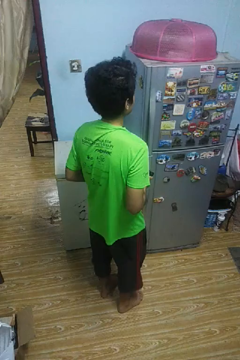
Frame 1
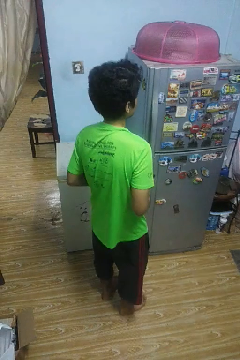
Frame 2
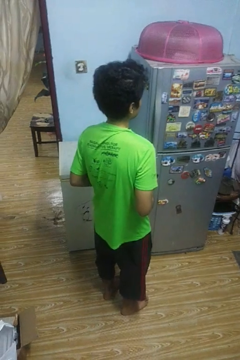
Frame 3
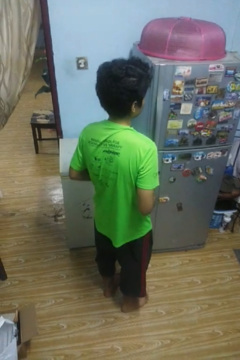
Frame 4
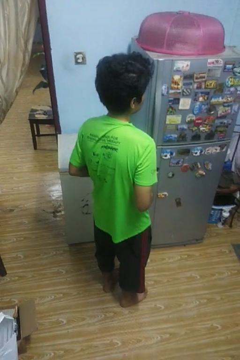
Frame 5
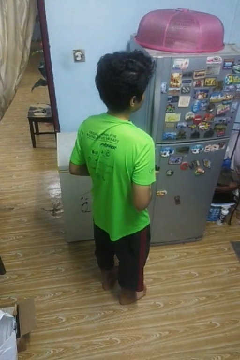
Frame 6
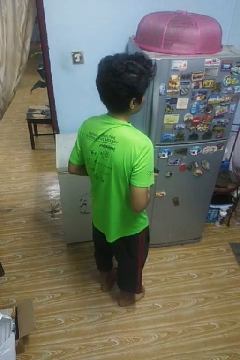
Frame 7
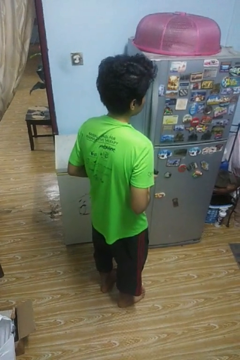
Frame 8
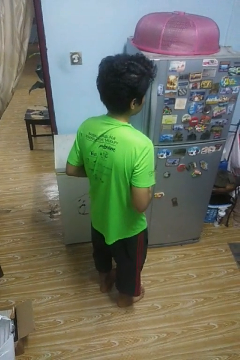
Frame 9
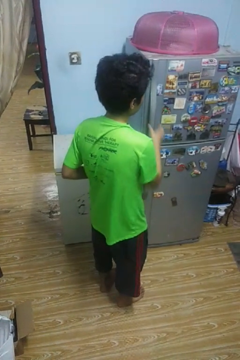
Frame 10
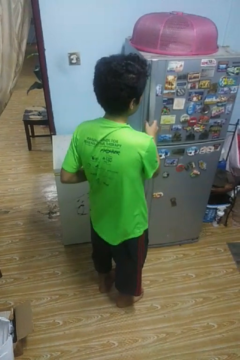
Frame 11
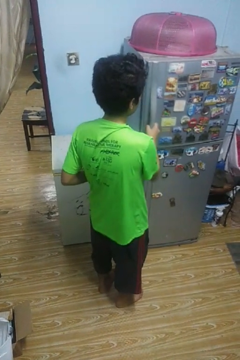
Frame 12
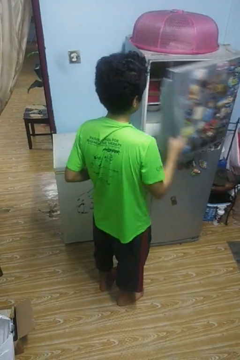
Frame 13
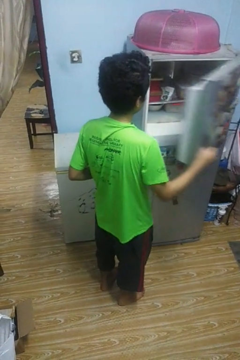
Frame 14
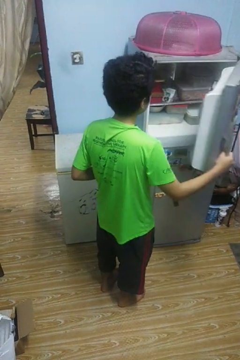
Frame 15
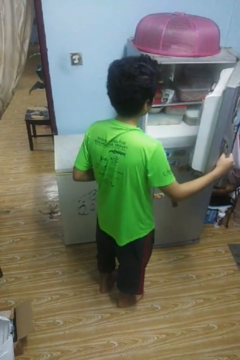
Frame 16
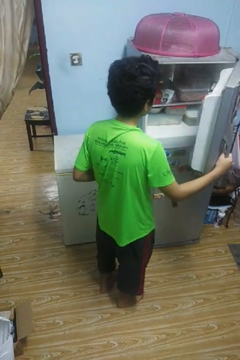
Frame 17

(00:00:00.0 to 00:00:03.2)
person opens refrigerator

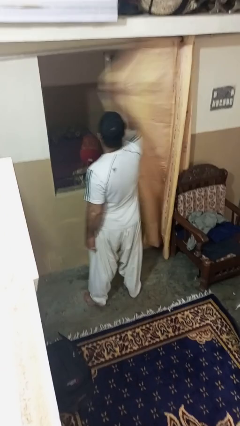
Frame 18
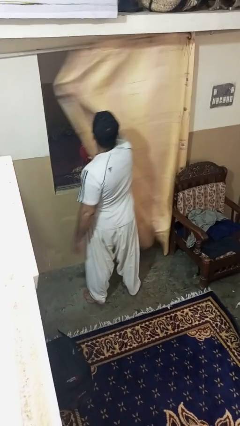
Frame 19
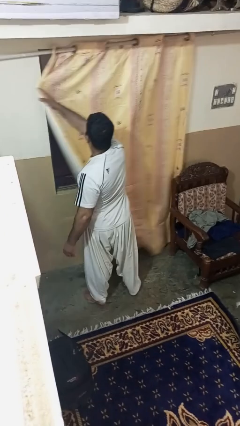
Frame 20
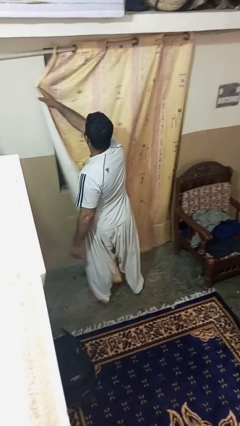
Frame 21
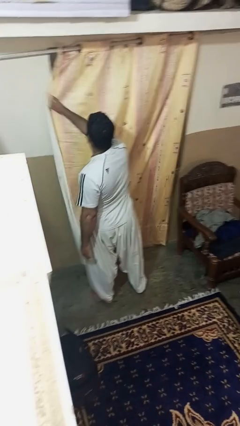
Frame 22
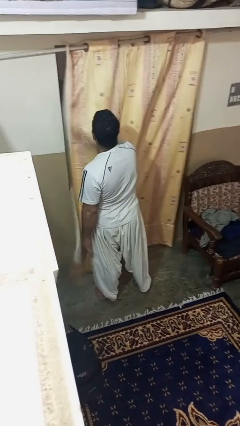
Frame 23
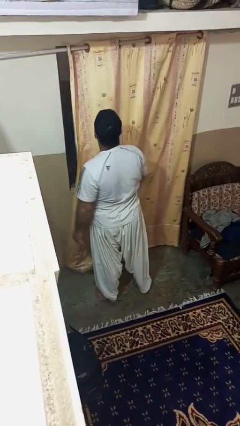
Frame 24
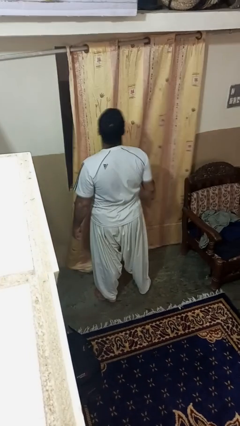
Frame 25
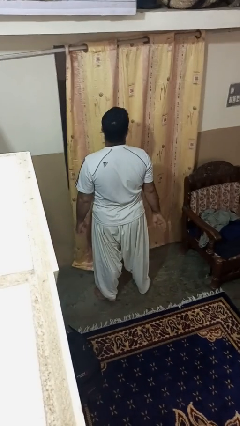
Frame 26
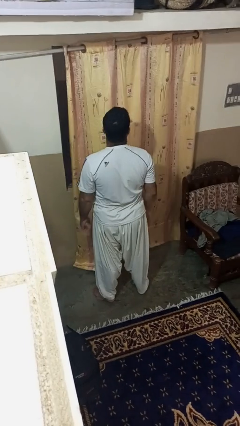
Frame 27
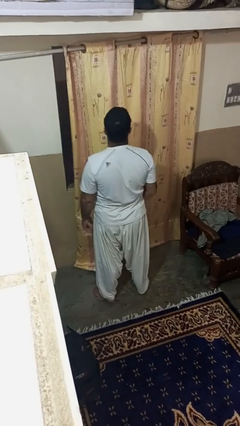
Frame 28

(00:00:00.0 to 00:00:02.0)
person closes curtains

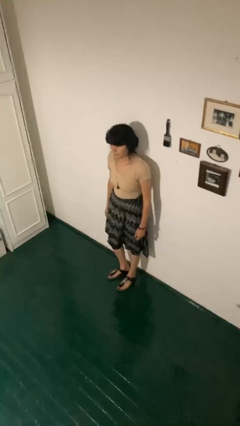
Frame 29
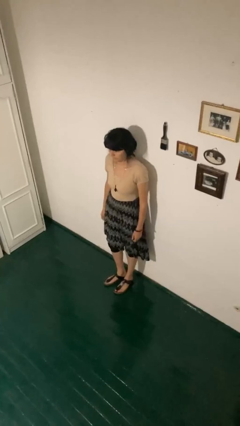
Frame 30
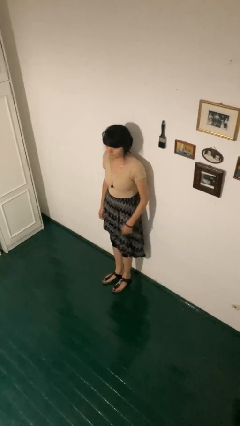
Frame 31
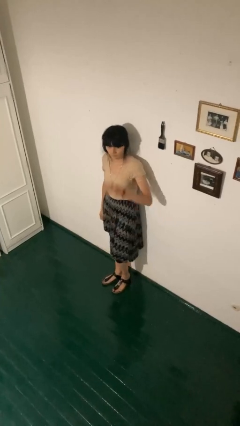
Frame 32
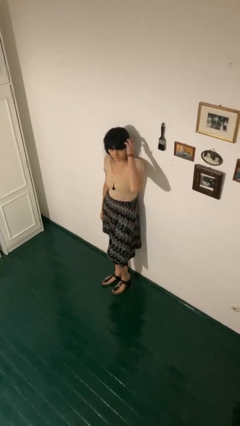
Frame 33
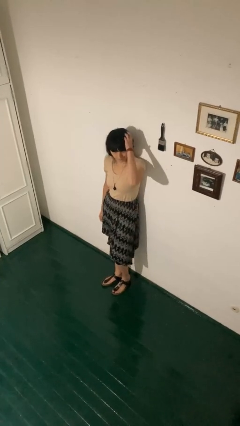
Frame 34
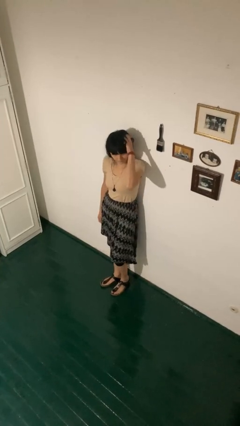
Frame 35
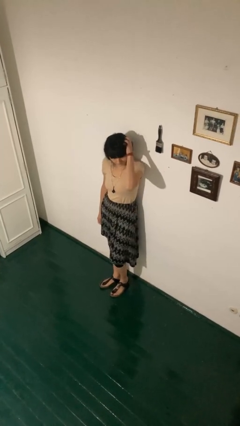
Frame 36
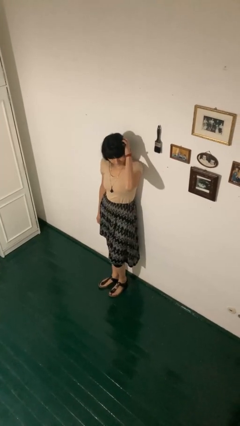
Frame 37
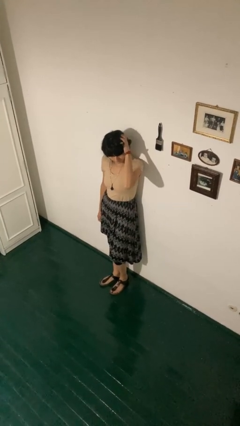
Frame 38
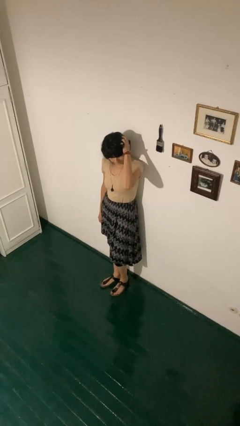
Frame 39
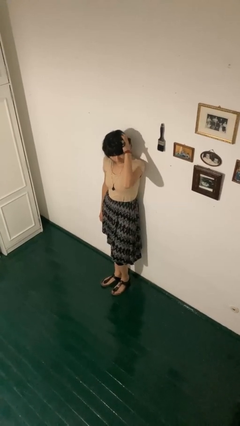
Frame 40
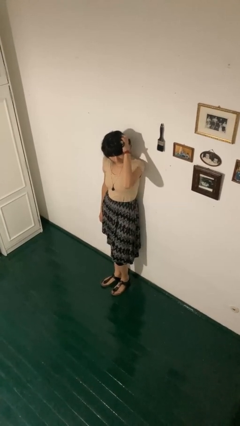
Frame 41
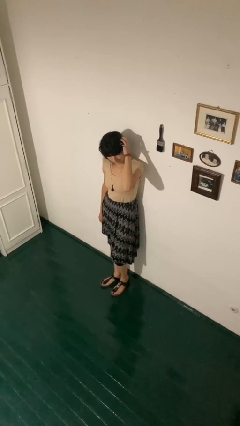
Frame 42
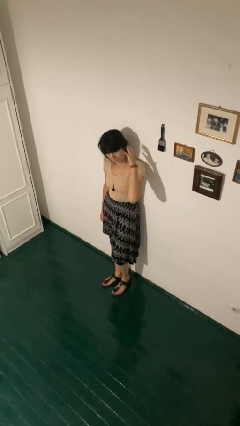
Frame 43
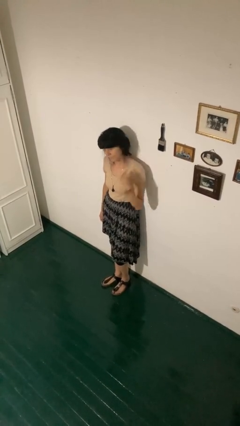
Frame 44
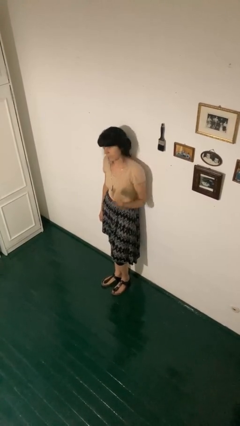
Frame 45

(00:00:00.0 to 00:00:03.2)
person scratches face

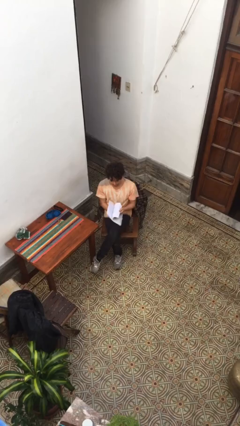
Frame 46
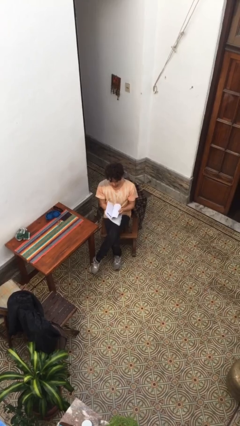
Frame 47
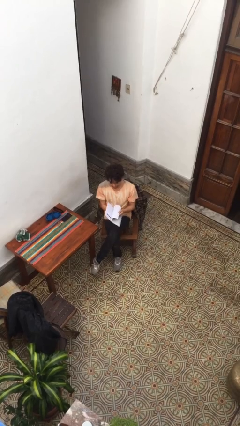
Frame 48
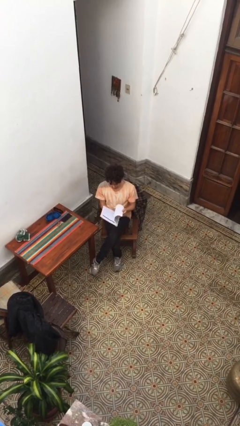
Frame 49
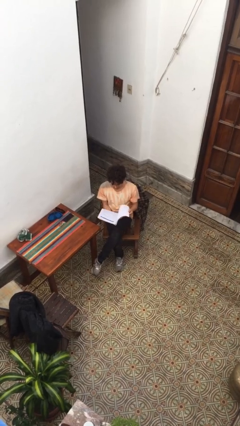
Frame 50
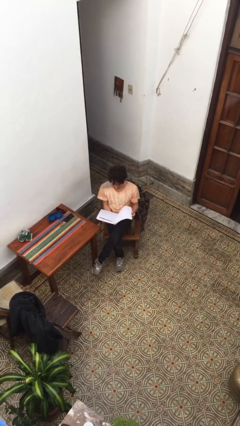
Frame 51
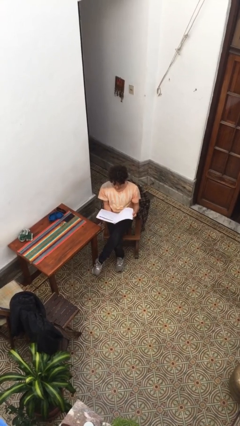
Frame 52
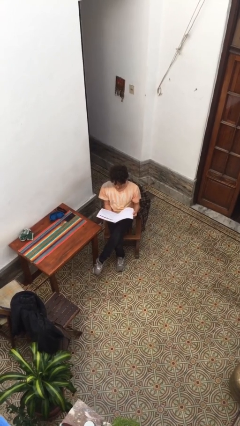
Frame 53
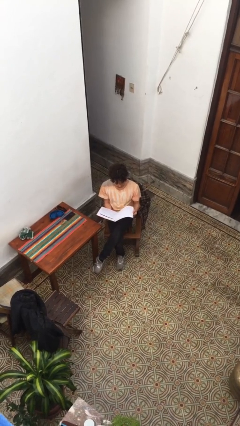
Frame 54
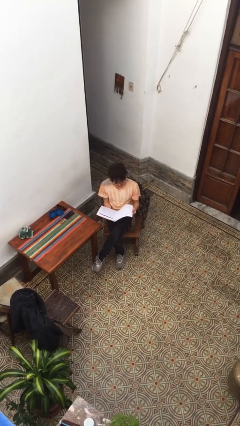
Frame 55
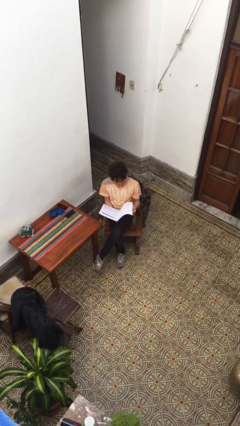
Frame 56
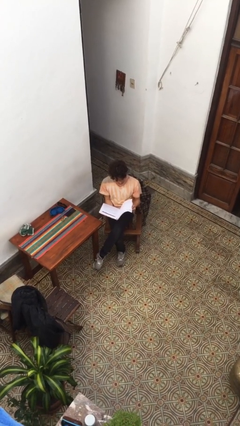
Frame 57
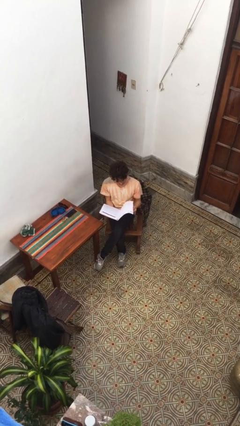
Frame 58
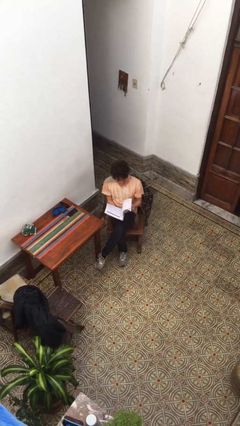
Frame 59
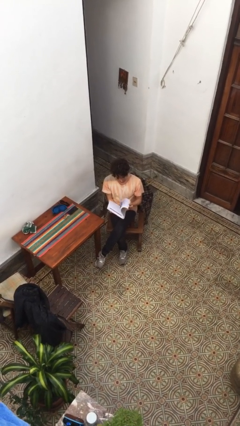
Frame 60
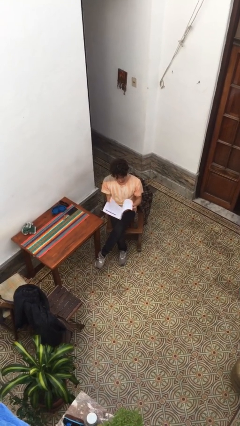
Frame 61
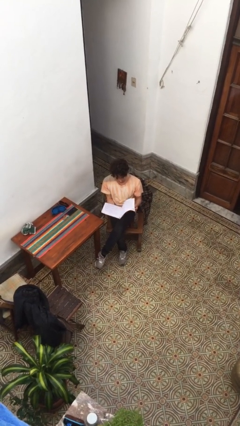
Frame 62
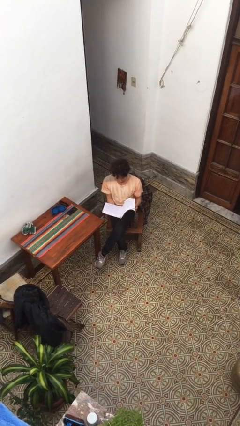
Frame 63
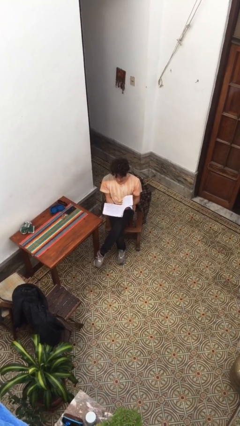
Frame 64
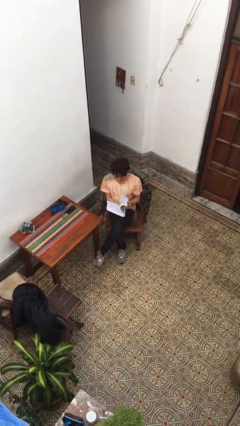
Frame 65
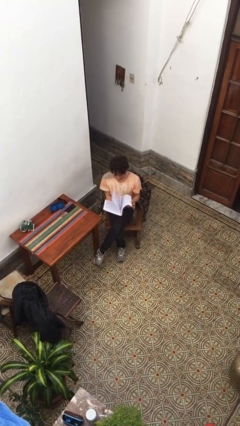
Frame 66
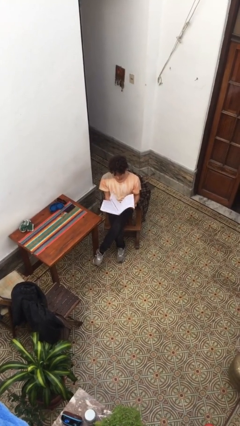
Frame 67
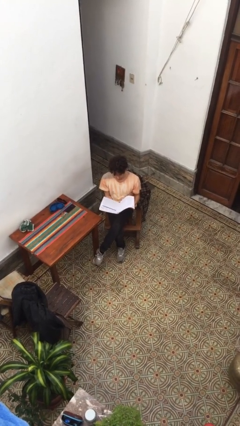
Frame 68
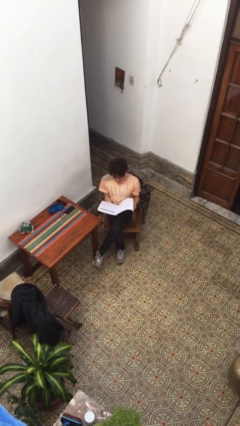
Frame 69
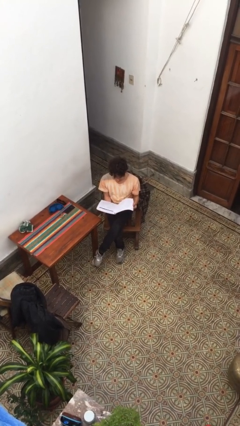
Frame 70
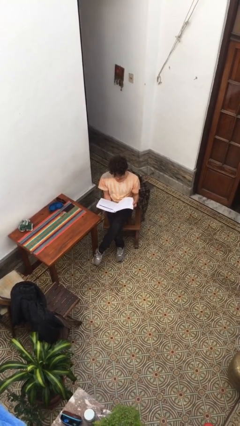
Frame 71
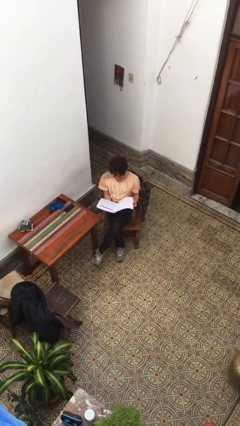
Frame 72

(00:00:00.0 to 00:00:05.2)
person reads document

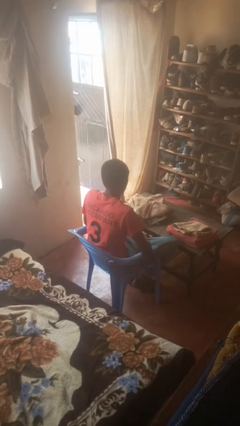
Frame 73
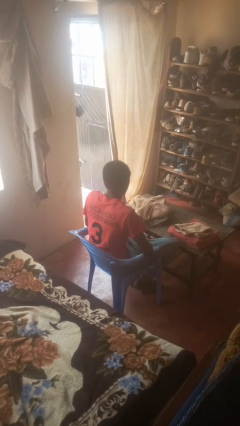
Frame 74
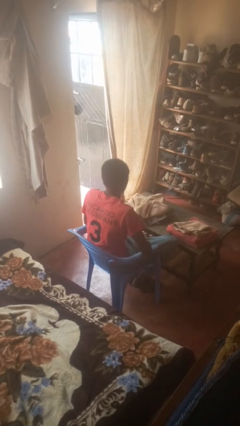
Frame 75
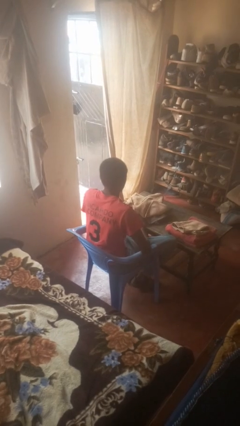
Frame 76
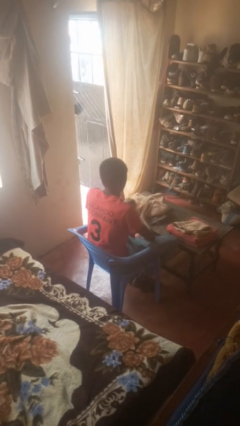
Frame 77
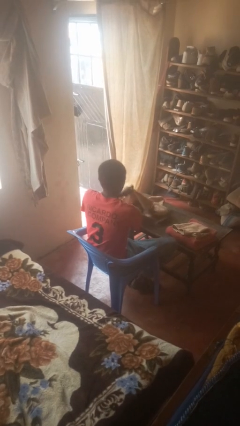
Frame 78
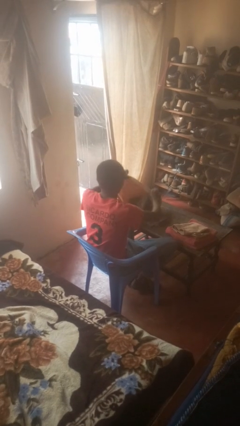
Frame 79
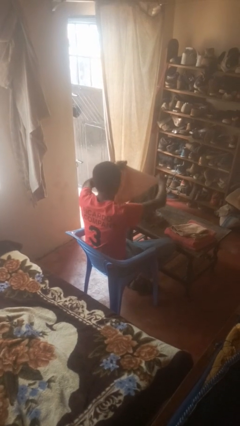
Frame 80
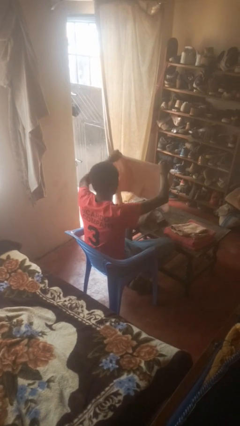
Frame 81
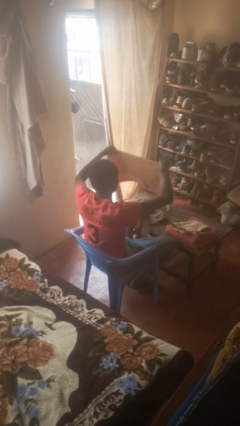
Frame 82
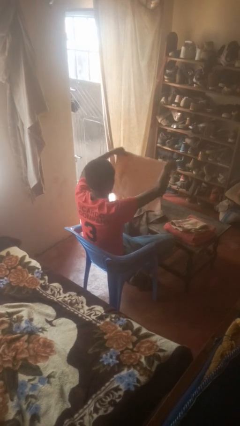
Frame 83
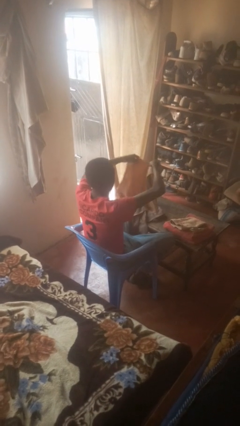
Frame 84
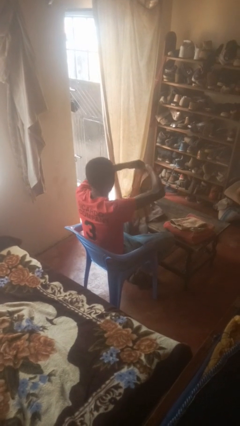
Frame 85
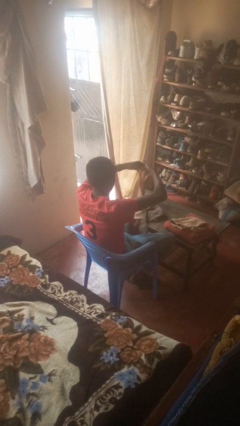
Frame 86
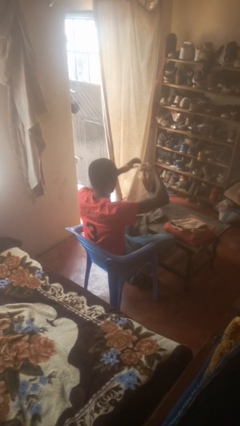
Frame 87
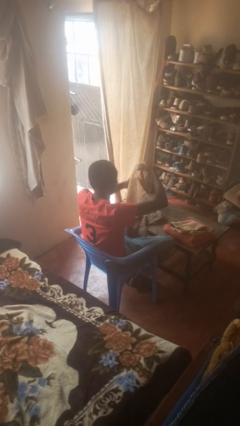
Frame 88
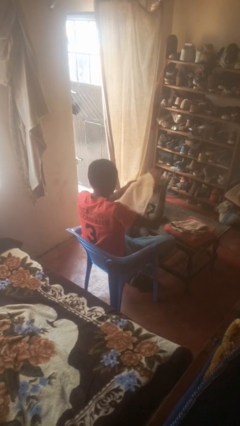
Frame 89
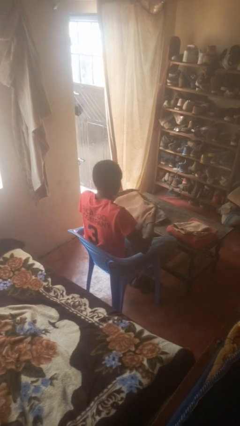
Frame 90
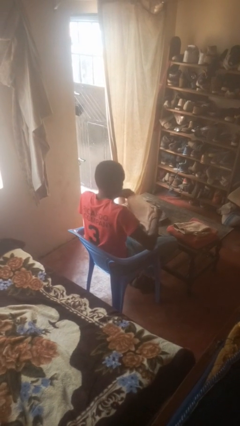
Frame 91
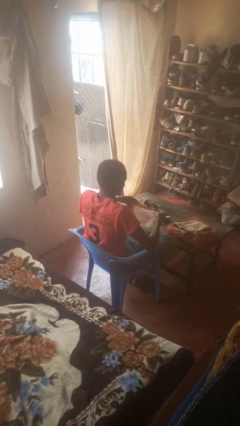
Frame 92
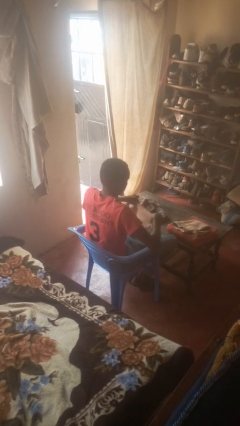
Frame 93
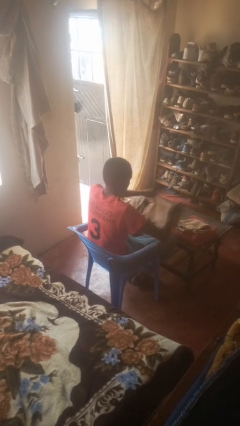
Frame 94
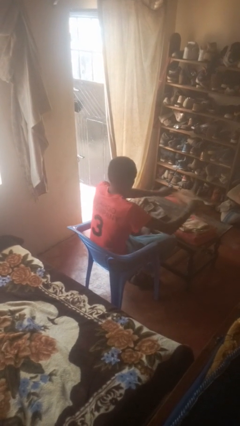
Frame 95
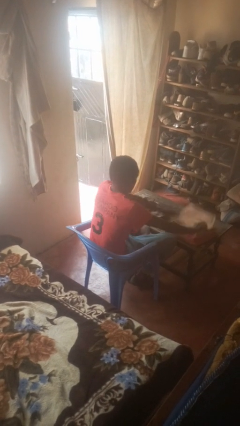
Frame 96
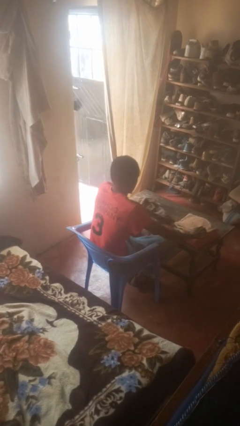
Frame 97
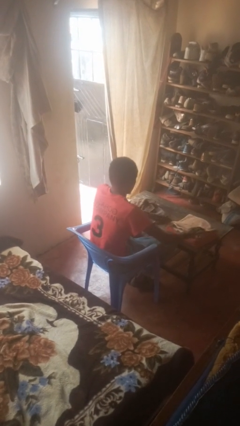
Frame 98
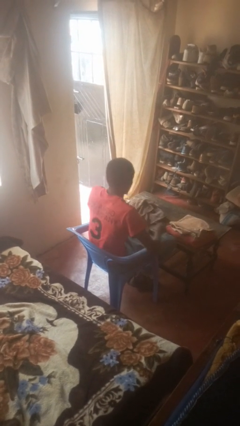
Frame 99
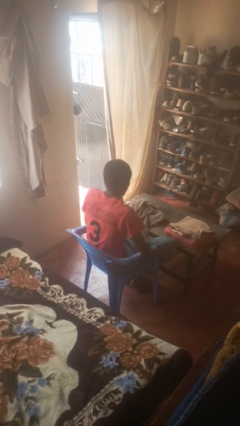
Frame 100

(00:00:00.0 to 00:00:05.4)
person folds towel
